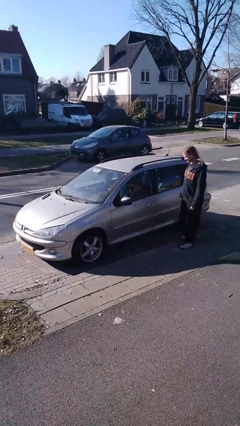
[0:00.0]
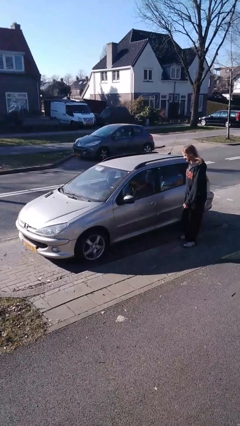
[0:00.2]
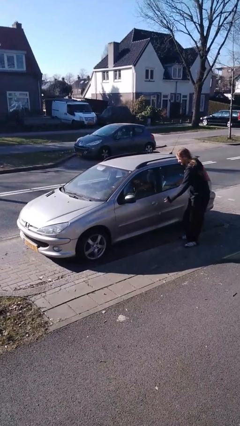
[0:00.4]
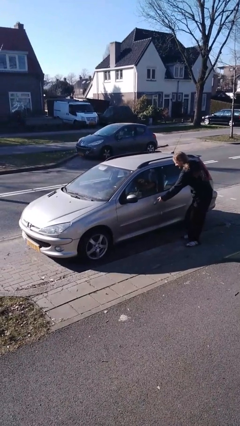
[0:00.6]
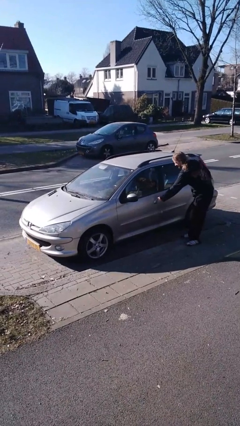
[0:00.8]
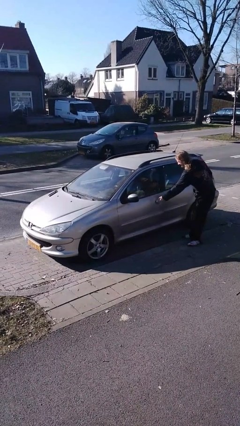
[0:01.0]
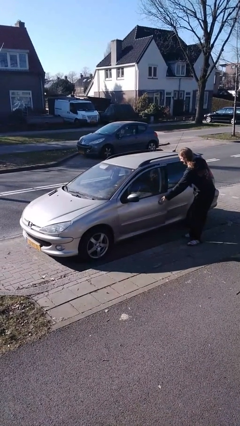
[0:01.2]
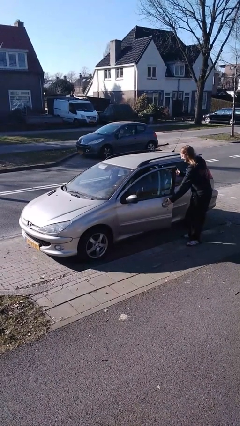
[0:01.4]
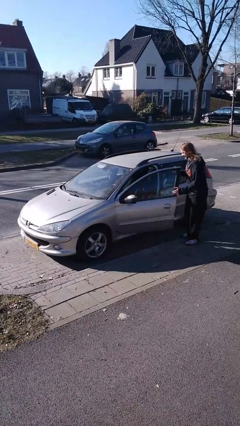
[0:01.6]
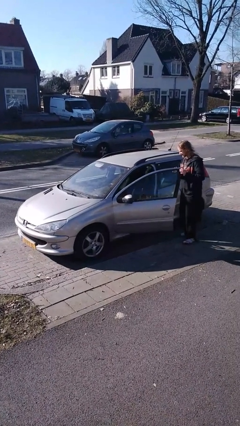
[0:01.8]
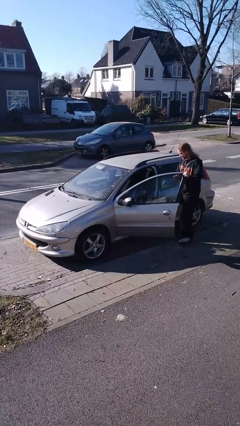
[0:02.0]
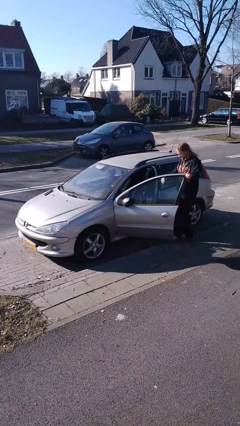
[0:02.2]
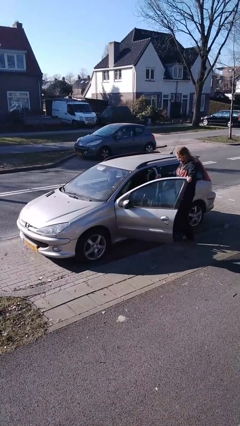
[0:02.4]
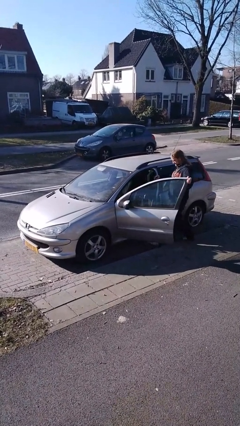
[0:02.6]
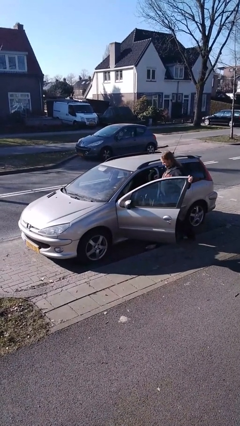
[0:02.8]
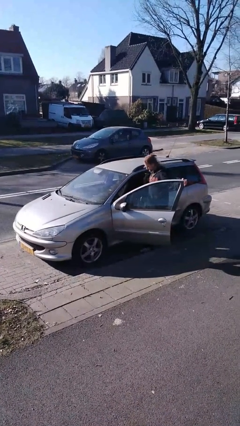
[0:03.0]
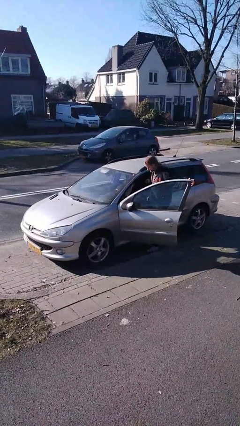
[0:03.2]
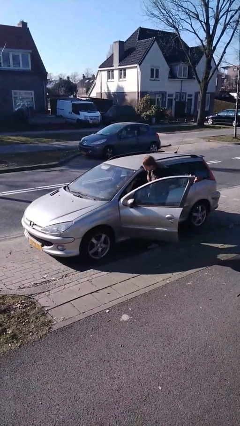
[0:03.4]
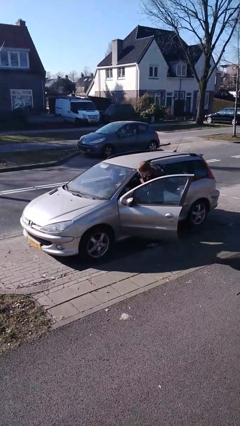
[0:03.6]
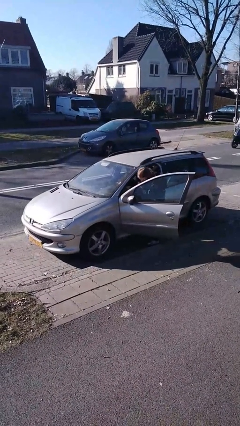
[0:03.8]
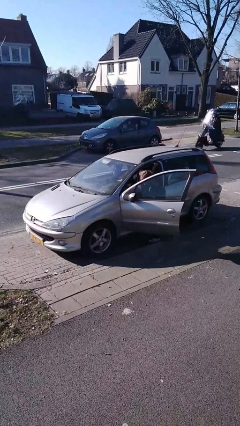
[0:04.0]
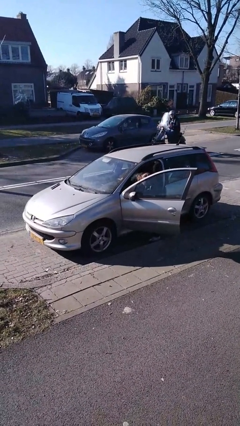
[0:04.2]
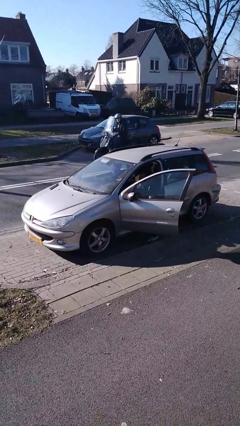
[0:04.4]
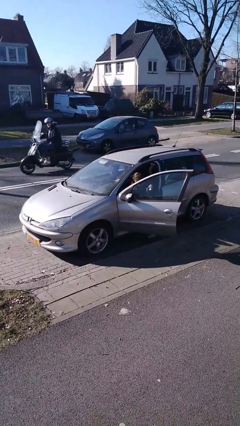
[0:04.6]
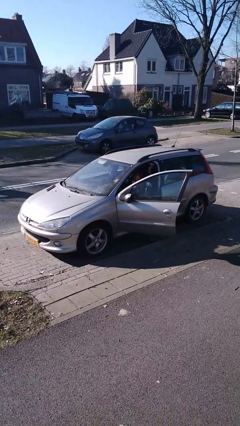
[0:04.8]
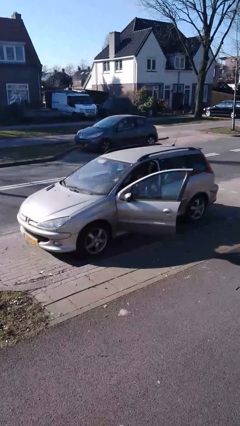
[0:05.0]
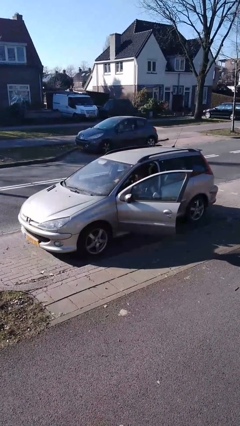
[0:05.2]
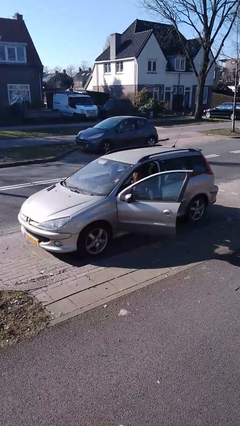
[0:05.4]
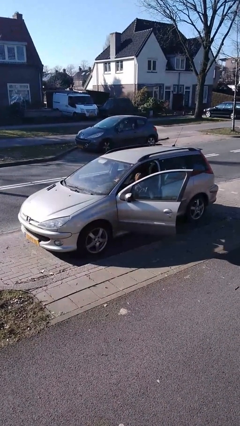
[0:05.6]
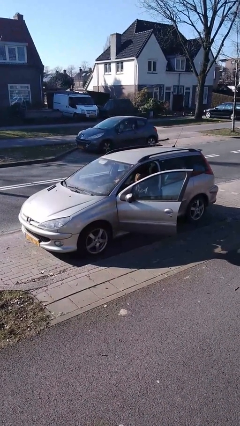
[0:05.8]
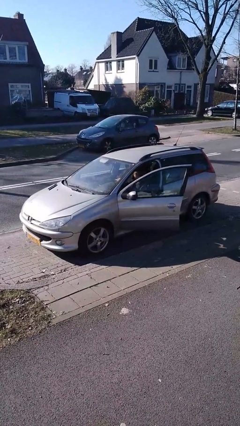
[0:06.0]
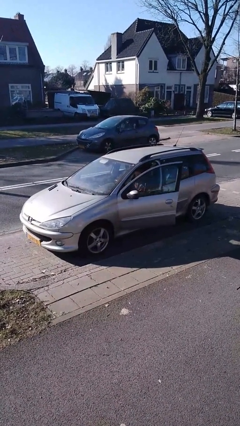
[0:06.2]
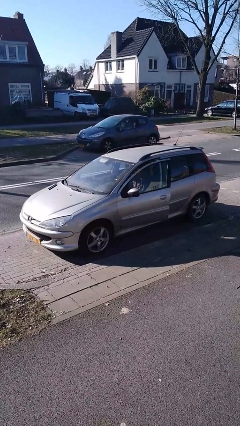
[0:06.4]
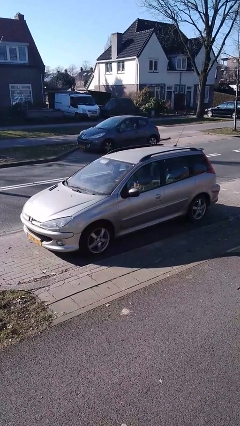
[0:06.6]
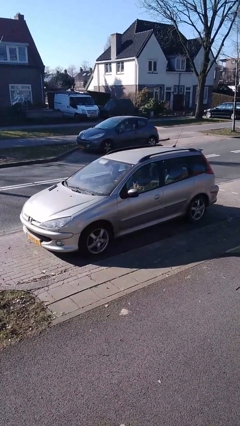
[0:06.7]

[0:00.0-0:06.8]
car picks up person

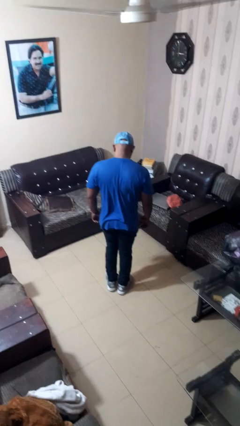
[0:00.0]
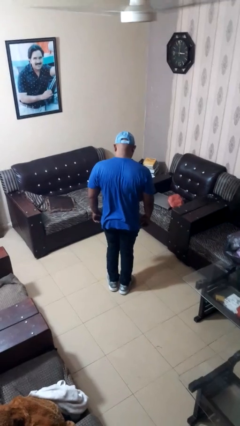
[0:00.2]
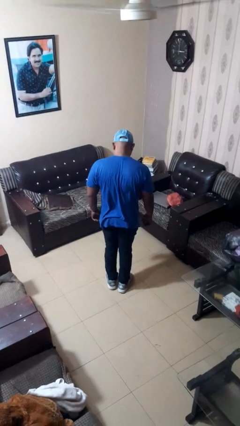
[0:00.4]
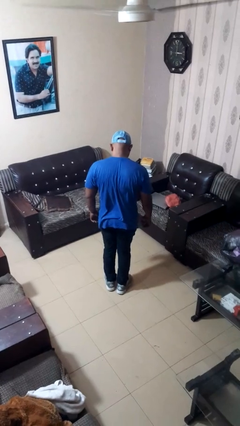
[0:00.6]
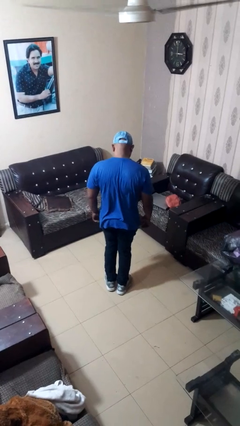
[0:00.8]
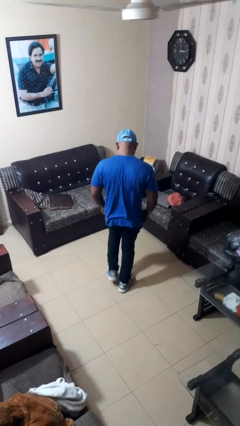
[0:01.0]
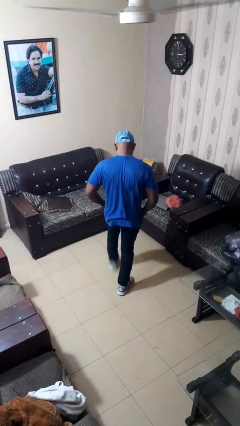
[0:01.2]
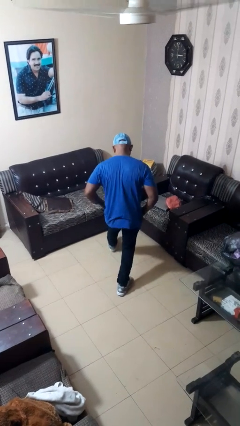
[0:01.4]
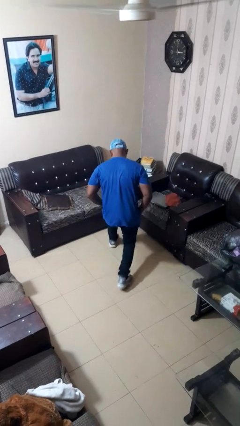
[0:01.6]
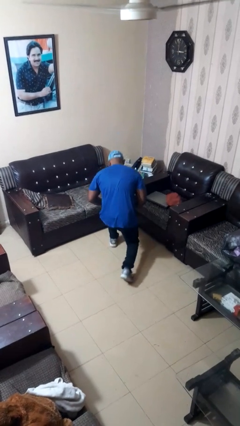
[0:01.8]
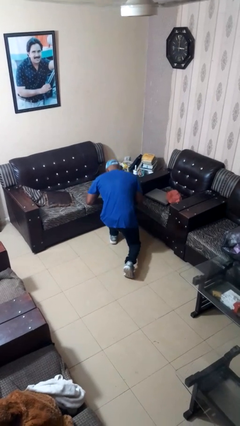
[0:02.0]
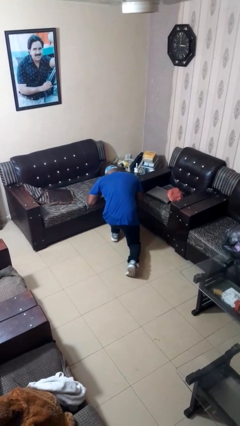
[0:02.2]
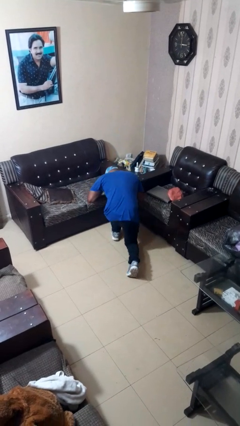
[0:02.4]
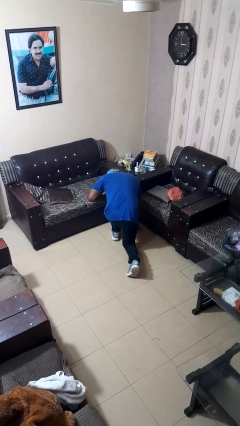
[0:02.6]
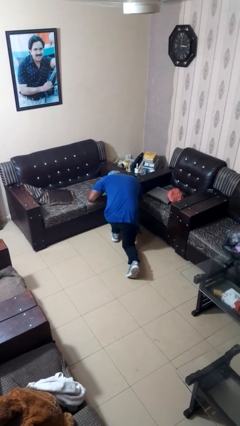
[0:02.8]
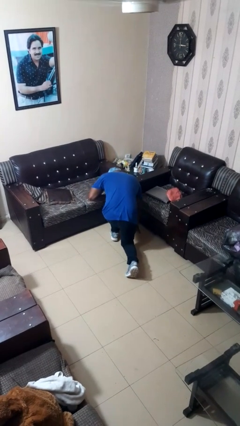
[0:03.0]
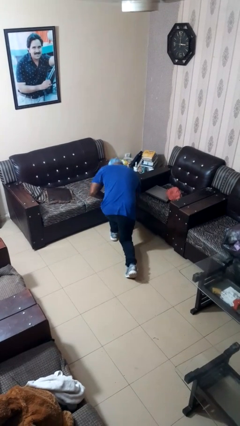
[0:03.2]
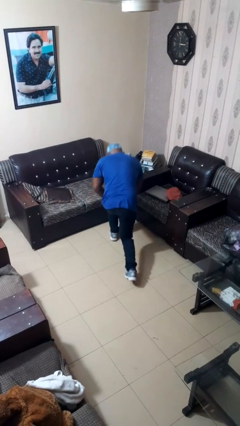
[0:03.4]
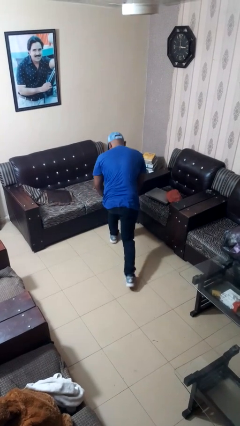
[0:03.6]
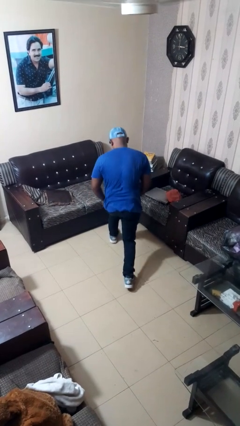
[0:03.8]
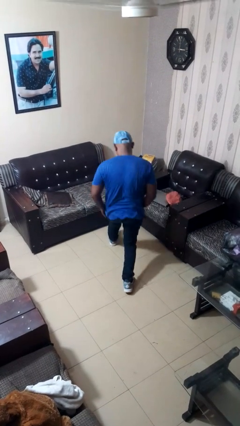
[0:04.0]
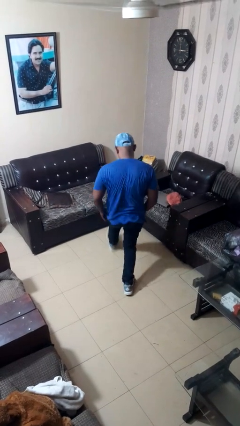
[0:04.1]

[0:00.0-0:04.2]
person exercises with lunges

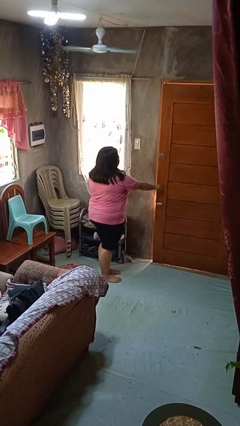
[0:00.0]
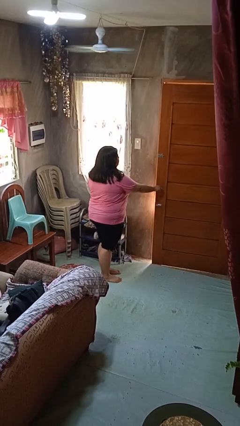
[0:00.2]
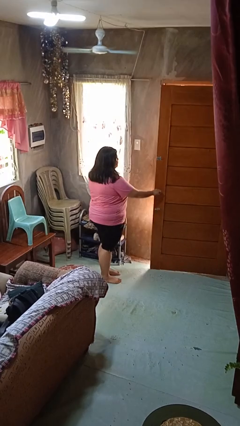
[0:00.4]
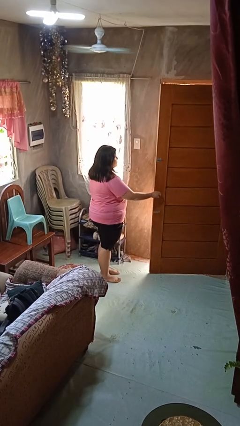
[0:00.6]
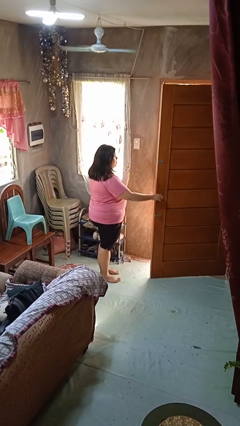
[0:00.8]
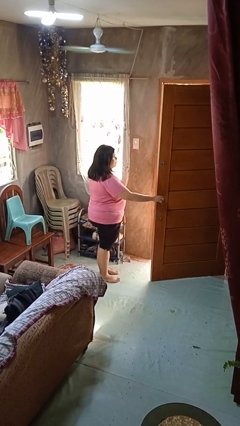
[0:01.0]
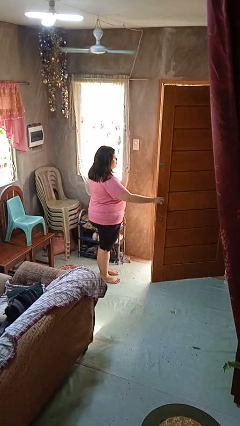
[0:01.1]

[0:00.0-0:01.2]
person opens facility door

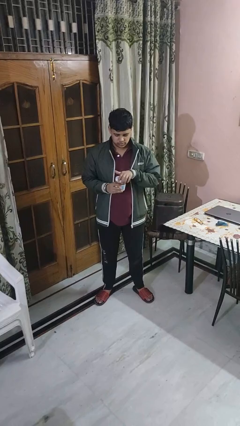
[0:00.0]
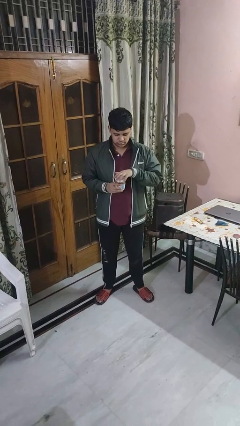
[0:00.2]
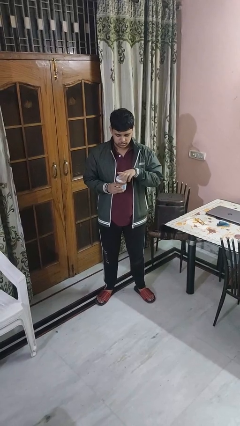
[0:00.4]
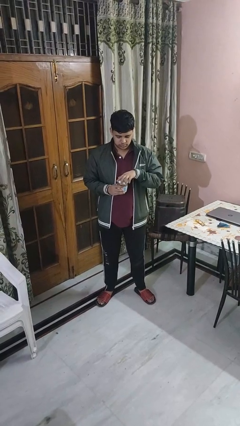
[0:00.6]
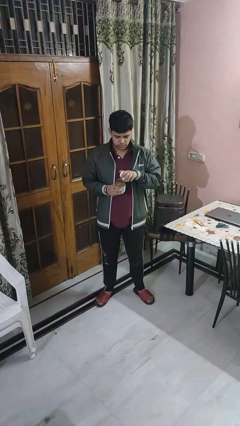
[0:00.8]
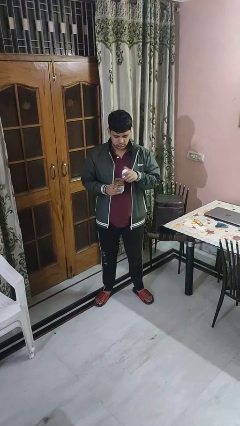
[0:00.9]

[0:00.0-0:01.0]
person opens jar

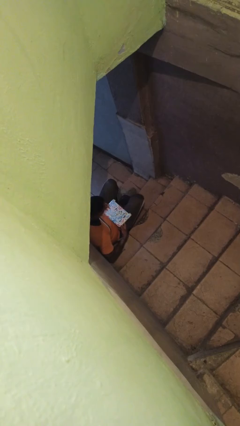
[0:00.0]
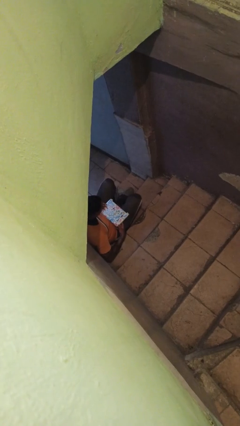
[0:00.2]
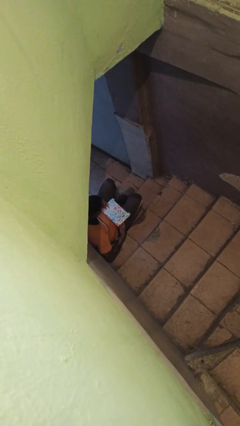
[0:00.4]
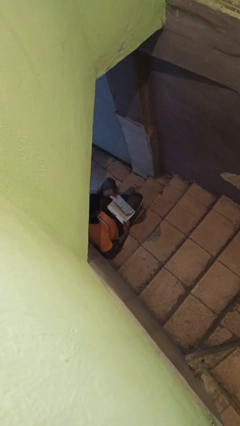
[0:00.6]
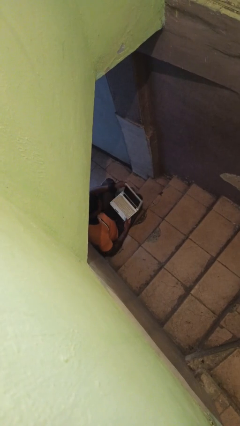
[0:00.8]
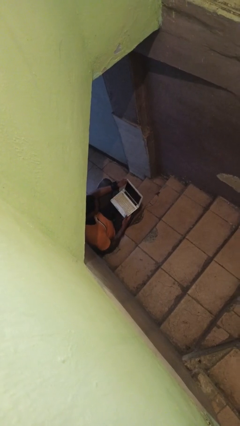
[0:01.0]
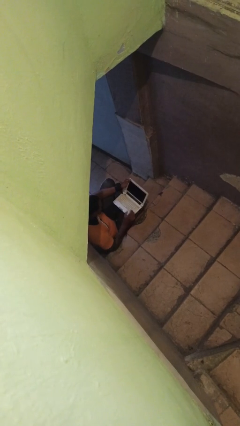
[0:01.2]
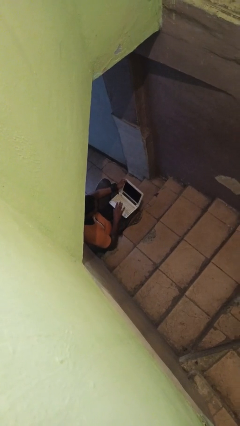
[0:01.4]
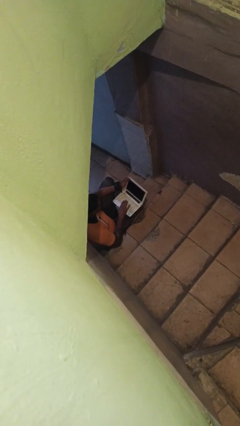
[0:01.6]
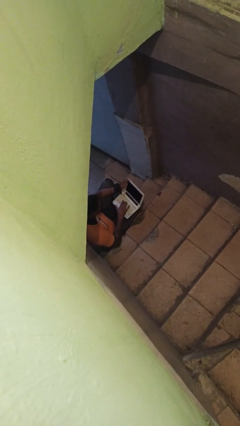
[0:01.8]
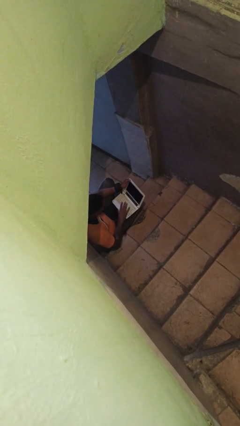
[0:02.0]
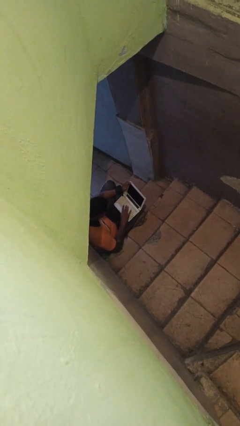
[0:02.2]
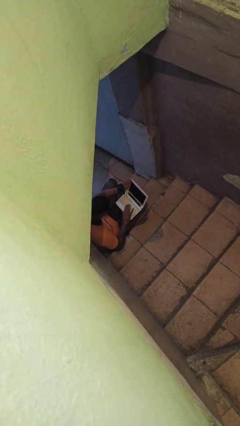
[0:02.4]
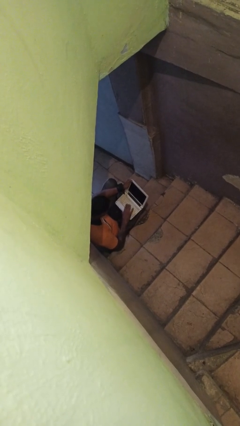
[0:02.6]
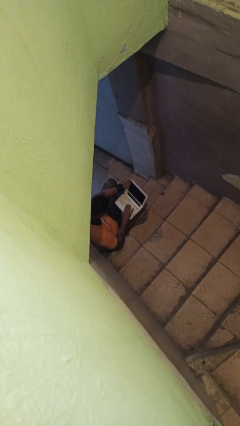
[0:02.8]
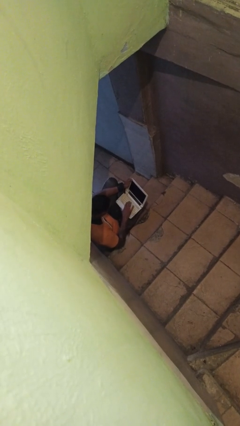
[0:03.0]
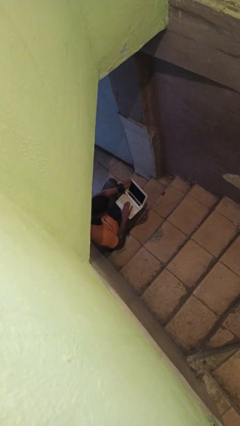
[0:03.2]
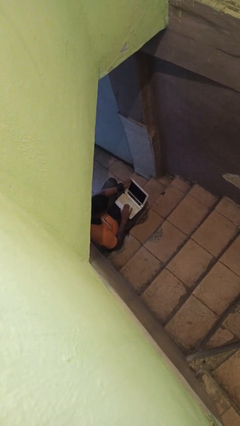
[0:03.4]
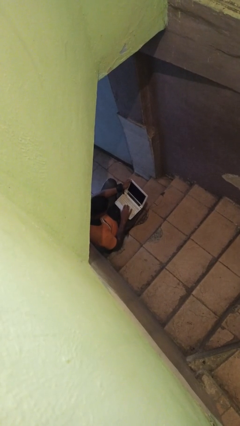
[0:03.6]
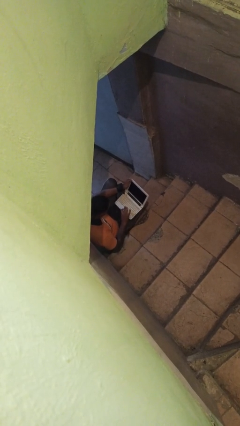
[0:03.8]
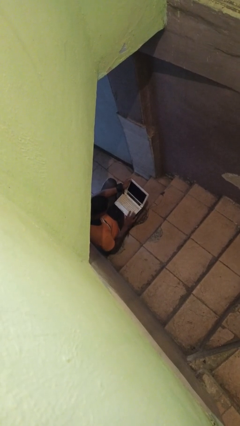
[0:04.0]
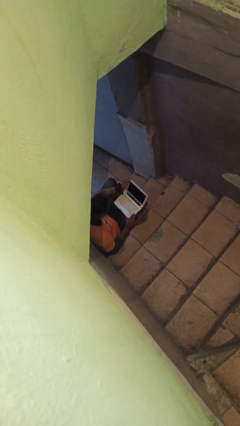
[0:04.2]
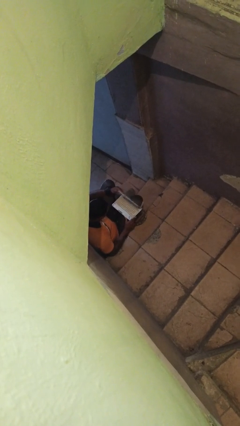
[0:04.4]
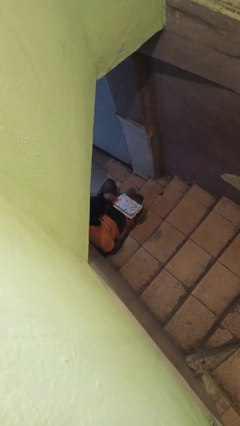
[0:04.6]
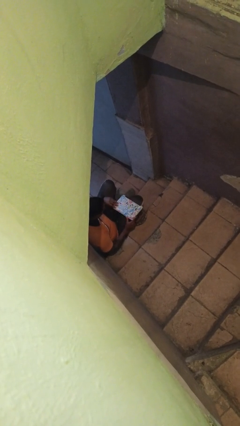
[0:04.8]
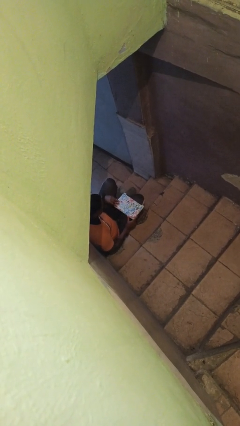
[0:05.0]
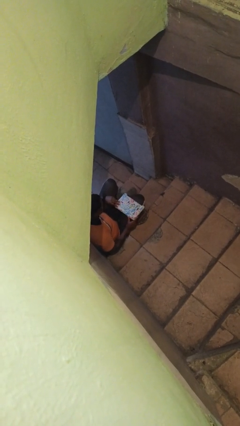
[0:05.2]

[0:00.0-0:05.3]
person interacts with laptop
